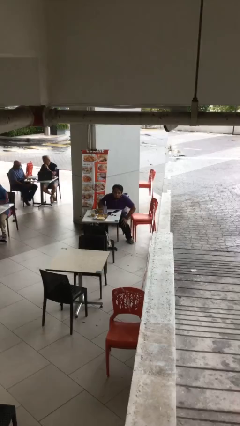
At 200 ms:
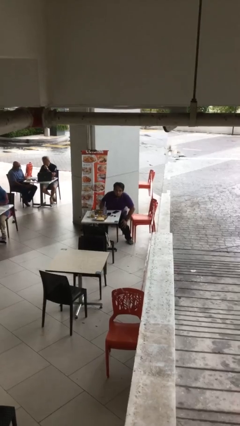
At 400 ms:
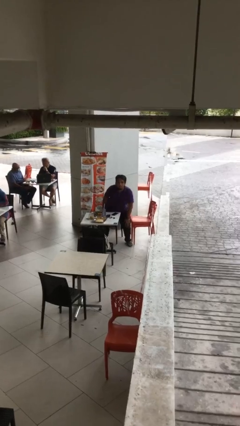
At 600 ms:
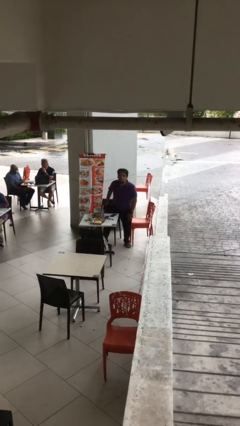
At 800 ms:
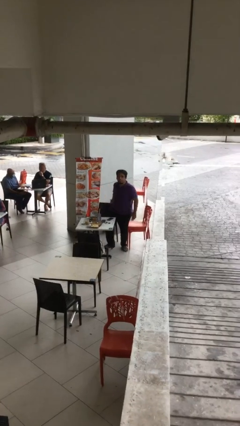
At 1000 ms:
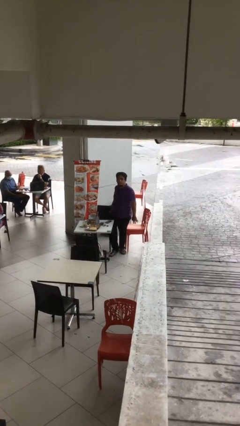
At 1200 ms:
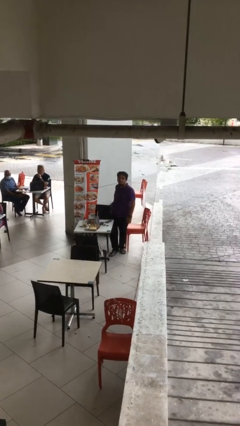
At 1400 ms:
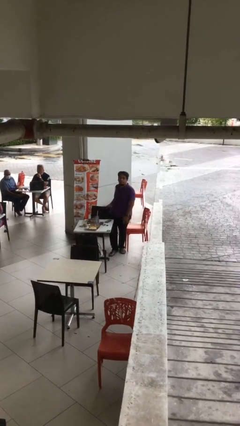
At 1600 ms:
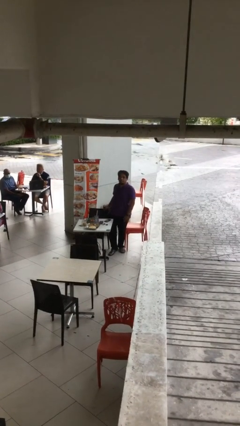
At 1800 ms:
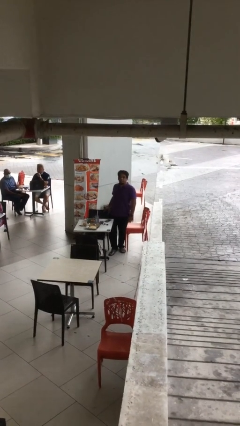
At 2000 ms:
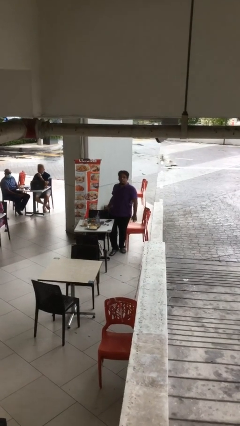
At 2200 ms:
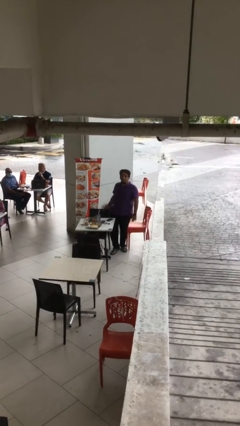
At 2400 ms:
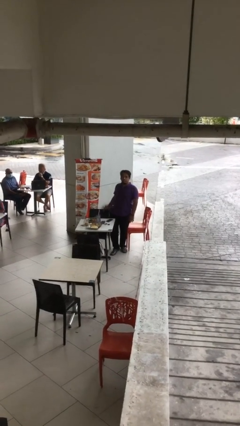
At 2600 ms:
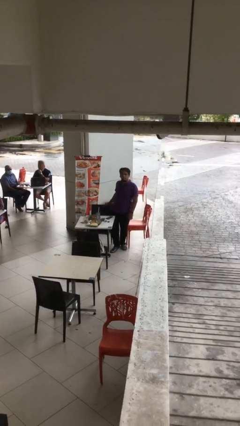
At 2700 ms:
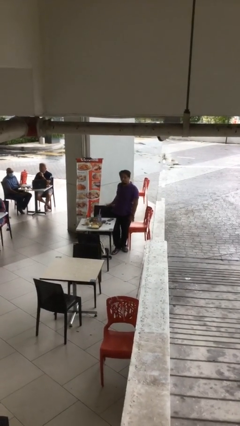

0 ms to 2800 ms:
person stands up

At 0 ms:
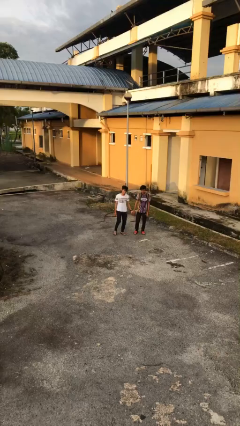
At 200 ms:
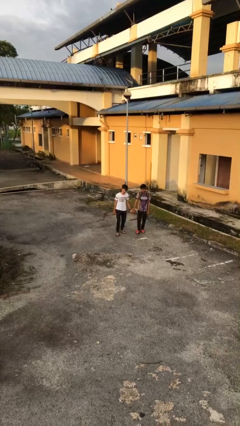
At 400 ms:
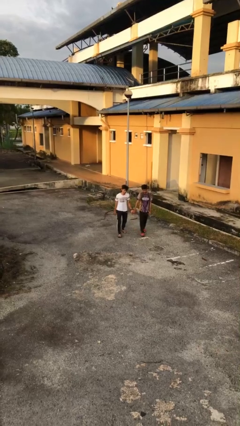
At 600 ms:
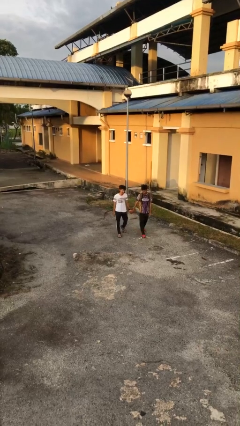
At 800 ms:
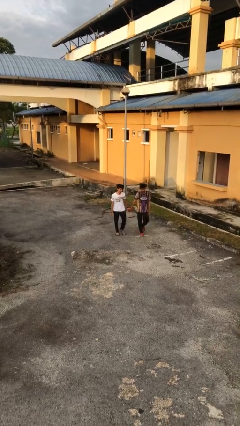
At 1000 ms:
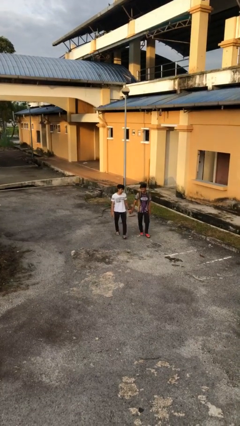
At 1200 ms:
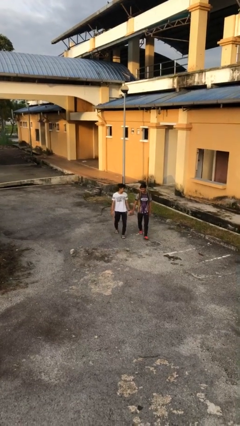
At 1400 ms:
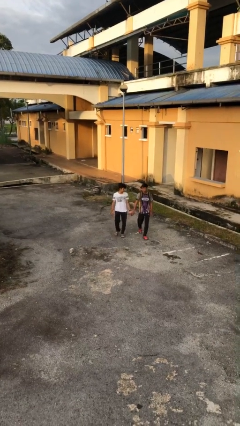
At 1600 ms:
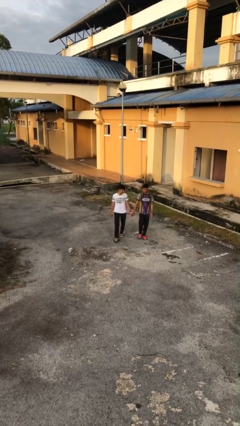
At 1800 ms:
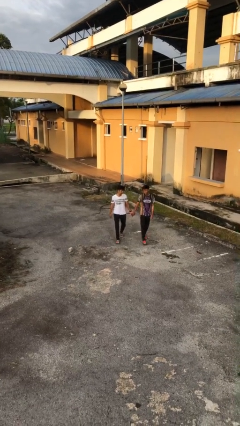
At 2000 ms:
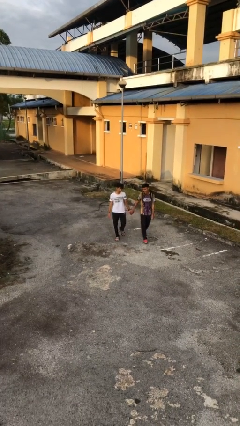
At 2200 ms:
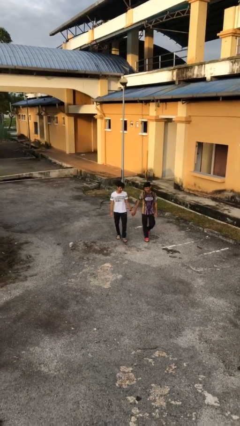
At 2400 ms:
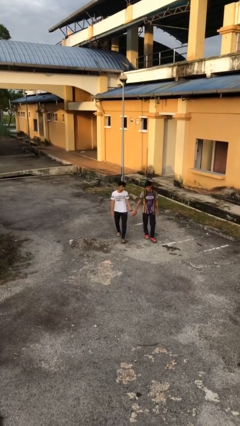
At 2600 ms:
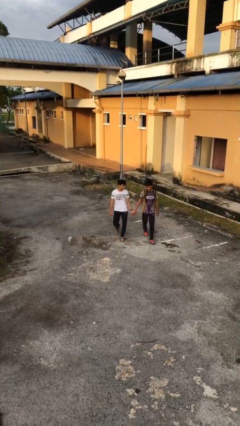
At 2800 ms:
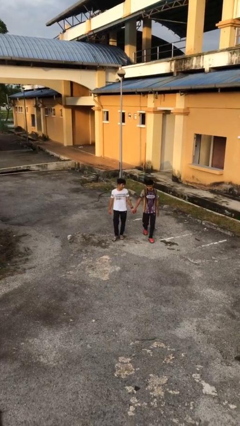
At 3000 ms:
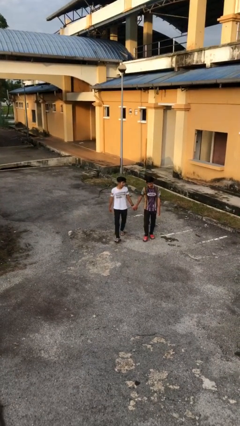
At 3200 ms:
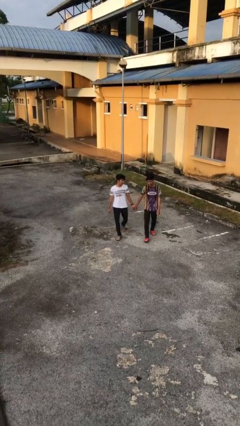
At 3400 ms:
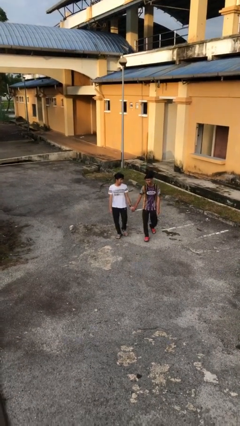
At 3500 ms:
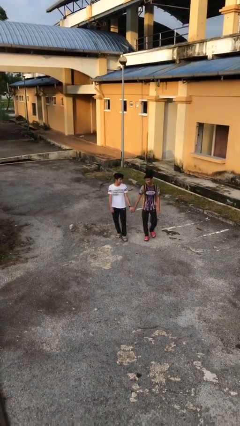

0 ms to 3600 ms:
person holds hand

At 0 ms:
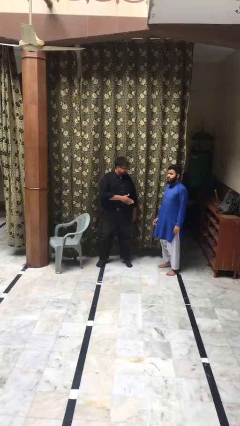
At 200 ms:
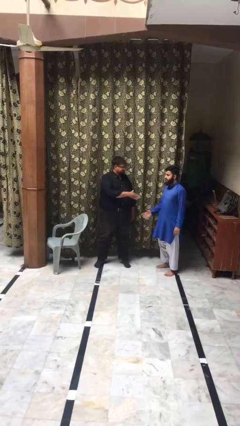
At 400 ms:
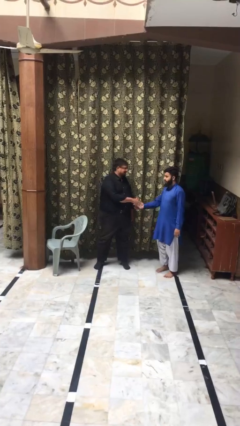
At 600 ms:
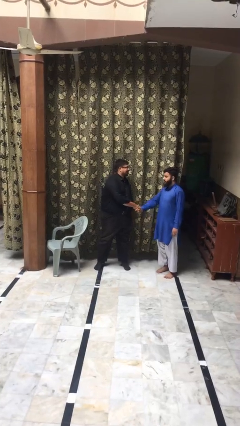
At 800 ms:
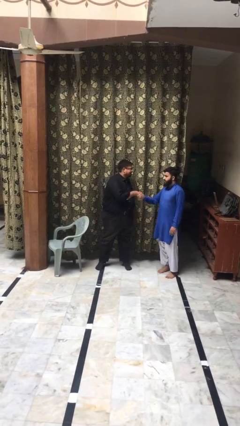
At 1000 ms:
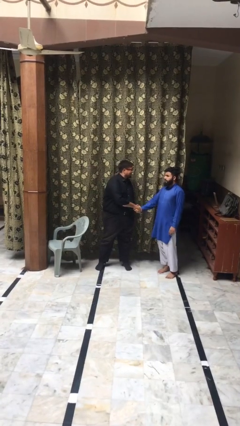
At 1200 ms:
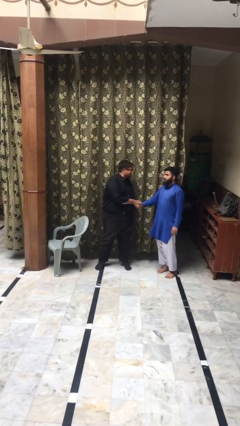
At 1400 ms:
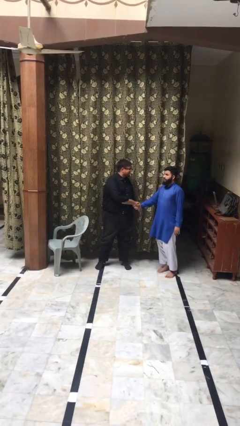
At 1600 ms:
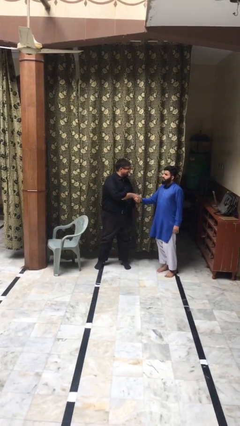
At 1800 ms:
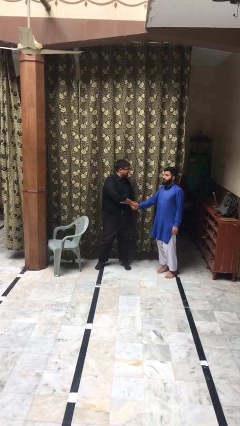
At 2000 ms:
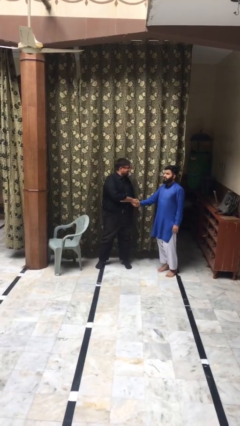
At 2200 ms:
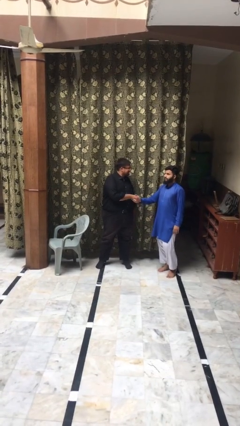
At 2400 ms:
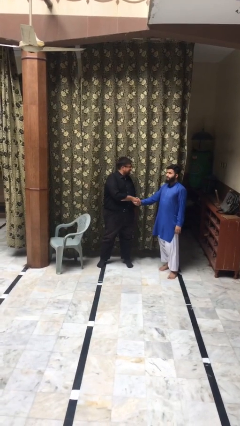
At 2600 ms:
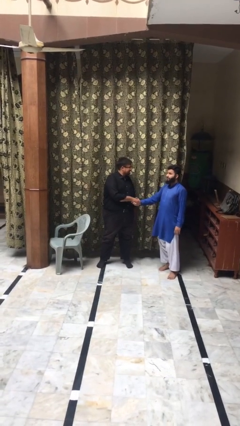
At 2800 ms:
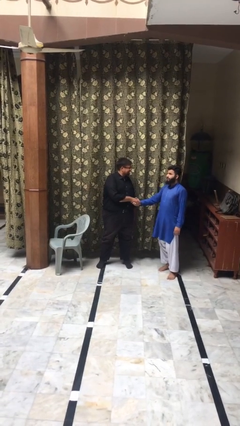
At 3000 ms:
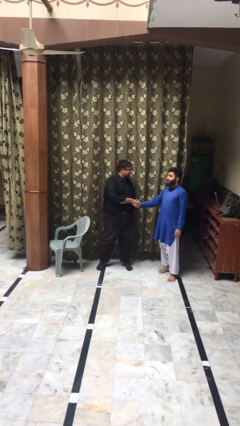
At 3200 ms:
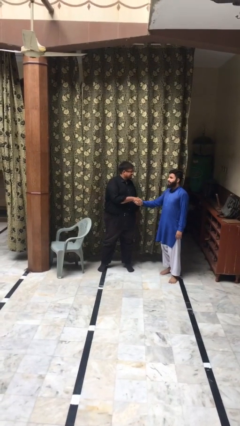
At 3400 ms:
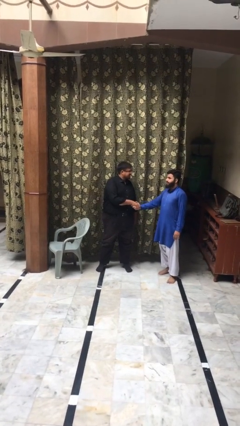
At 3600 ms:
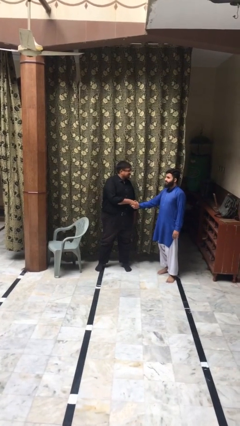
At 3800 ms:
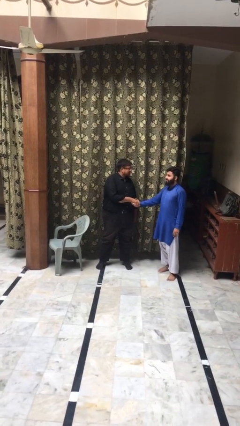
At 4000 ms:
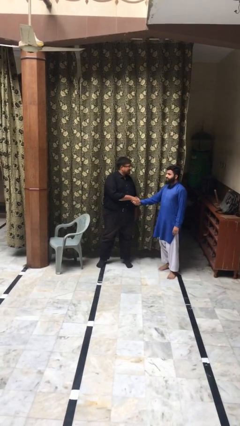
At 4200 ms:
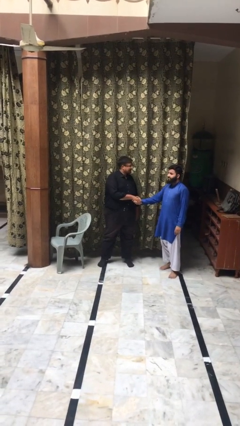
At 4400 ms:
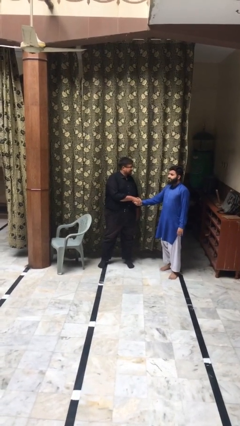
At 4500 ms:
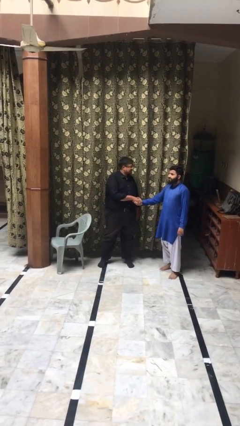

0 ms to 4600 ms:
person shakes hand

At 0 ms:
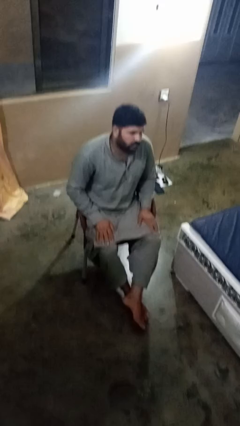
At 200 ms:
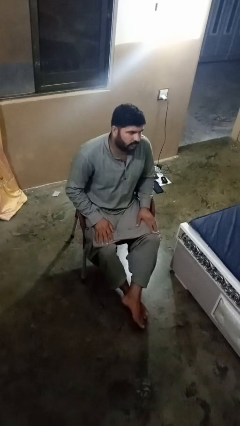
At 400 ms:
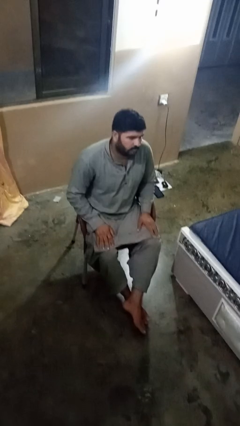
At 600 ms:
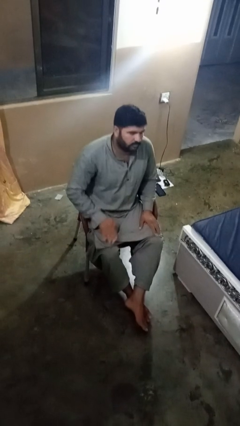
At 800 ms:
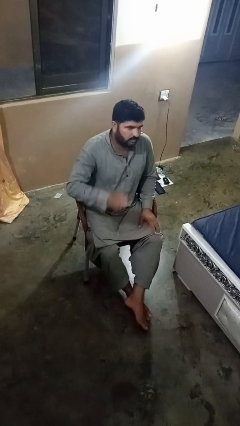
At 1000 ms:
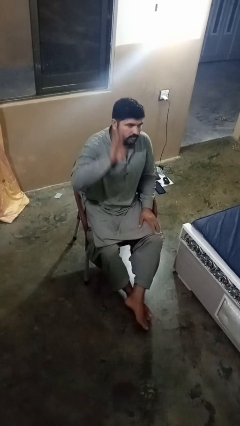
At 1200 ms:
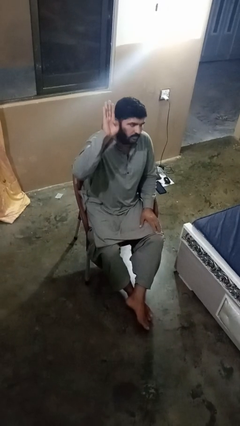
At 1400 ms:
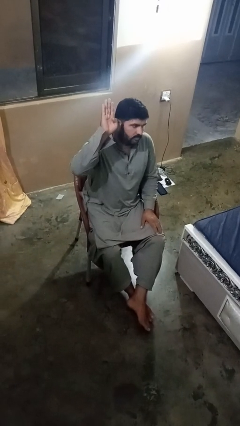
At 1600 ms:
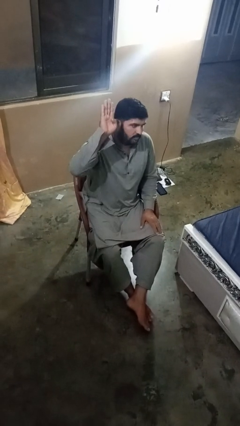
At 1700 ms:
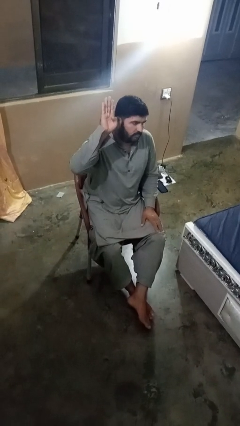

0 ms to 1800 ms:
person gestures number four

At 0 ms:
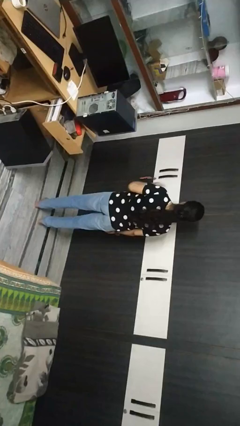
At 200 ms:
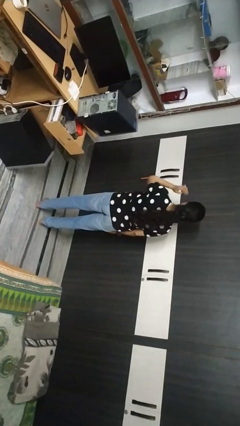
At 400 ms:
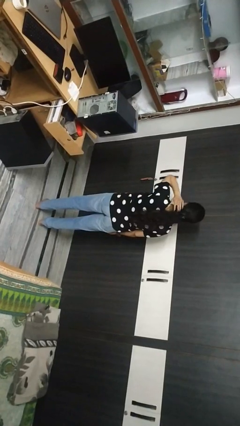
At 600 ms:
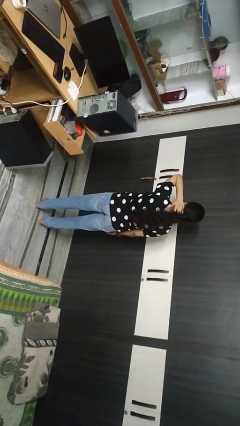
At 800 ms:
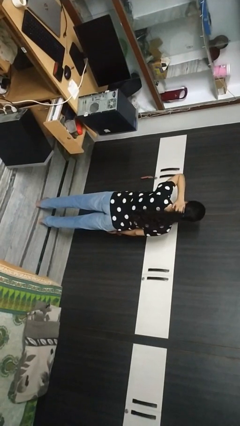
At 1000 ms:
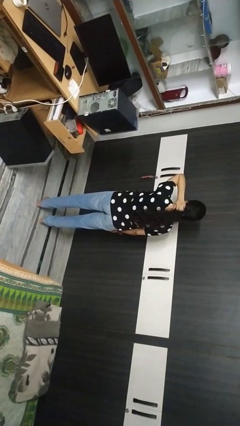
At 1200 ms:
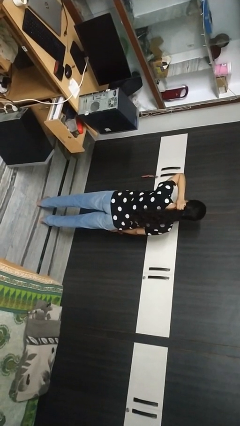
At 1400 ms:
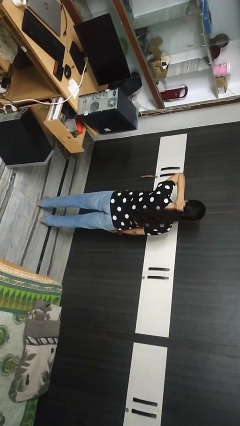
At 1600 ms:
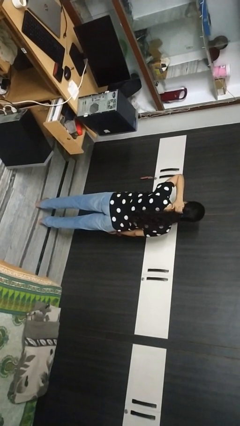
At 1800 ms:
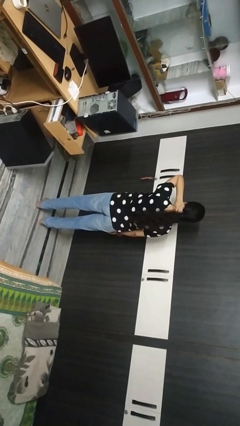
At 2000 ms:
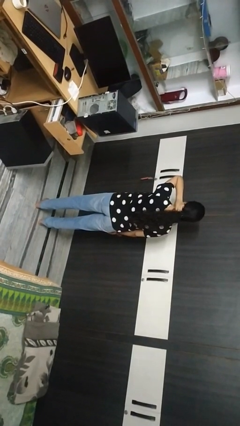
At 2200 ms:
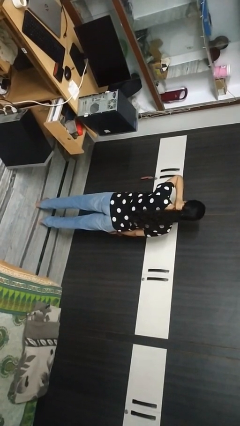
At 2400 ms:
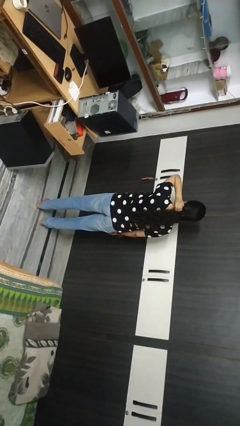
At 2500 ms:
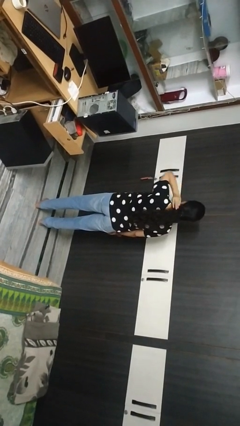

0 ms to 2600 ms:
person rubs neck

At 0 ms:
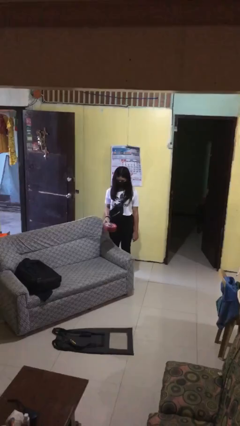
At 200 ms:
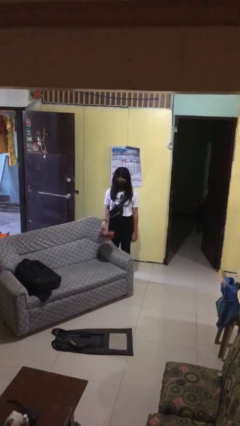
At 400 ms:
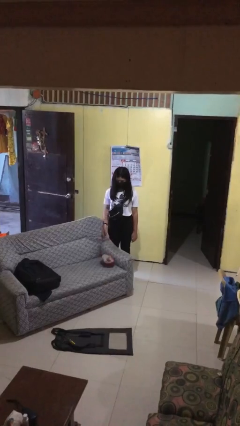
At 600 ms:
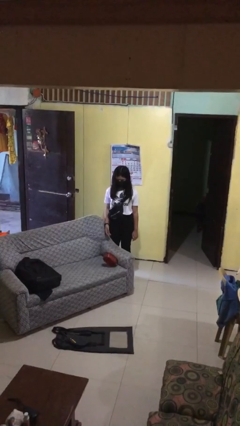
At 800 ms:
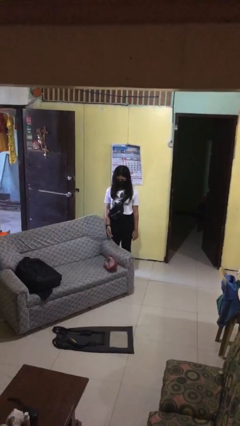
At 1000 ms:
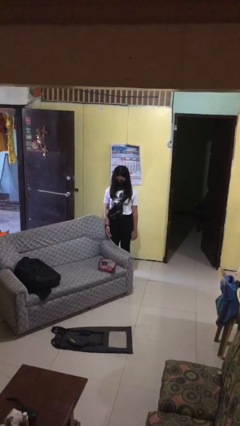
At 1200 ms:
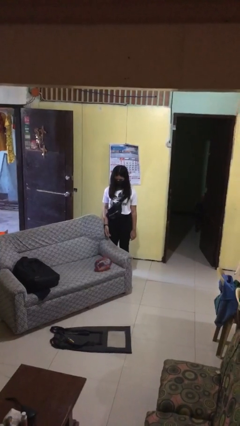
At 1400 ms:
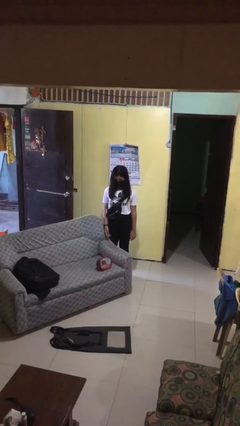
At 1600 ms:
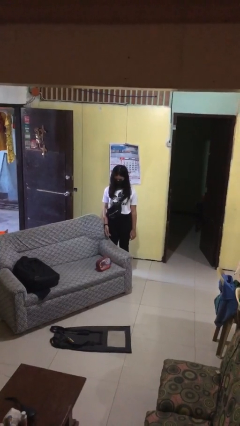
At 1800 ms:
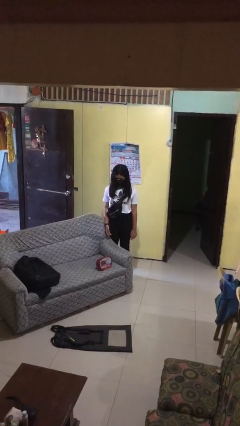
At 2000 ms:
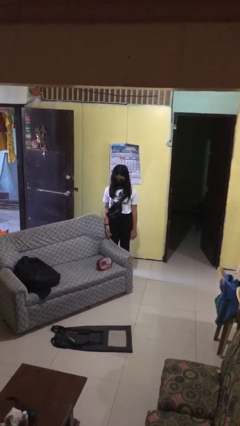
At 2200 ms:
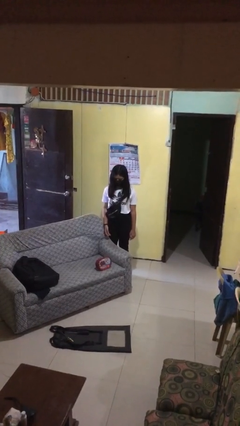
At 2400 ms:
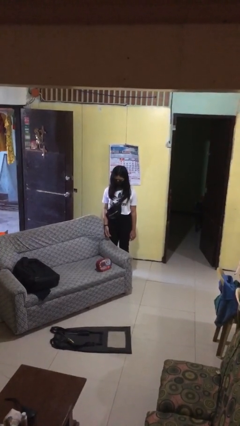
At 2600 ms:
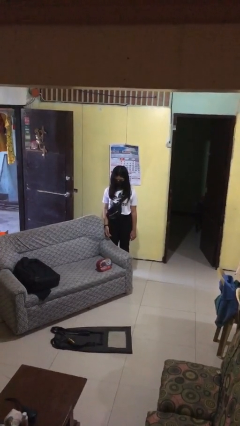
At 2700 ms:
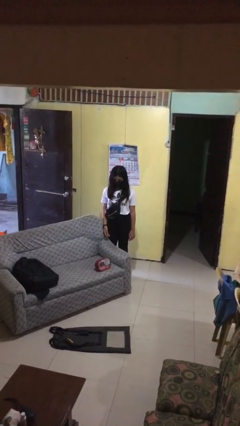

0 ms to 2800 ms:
person puts down object on couch
